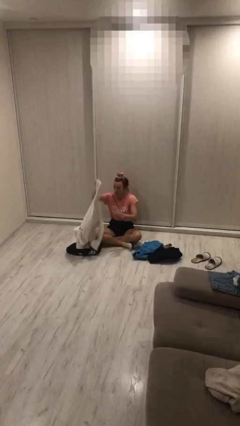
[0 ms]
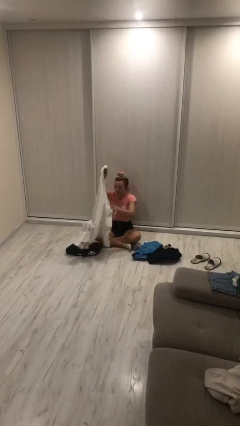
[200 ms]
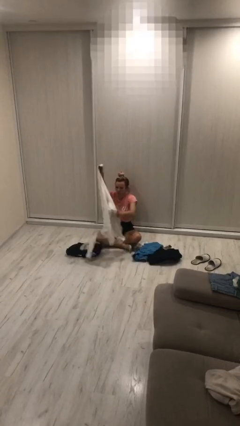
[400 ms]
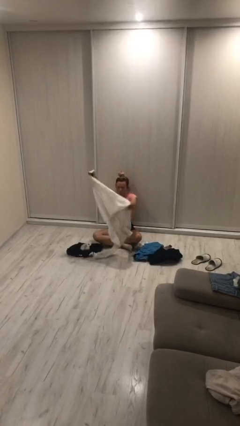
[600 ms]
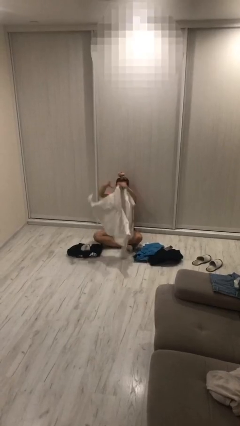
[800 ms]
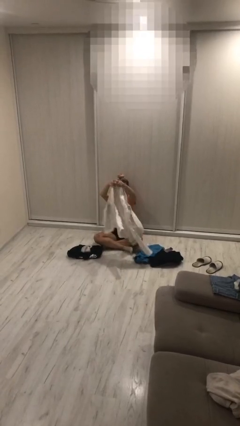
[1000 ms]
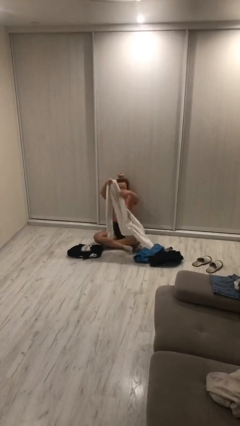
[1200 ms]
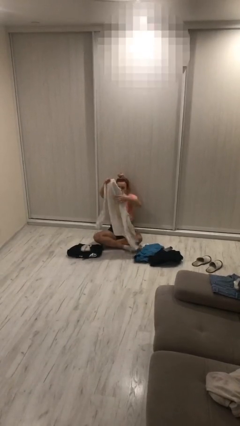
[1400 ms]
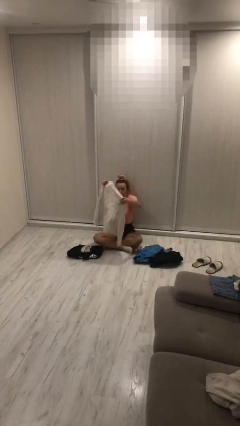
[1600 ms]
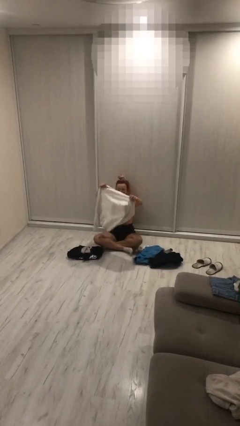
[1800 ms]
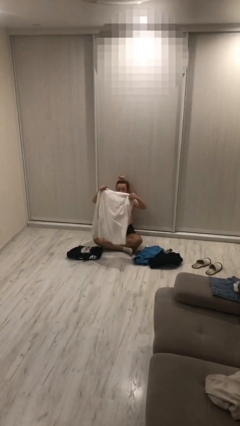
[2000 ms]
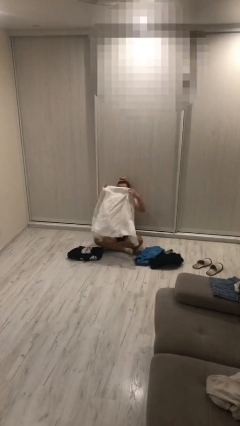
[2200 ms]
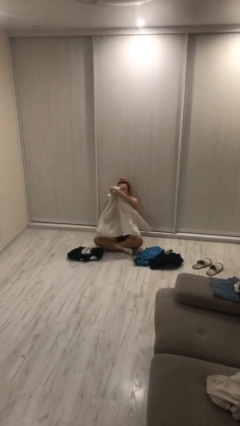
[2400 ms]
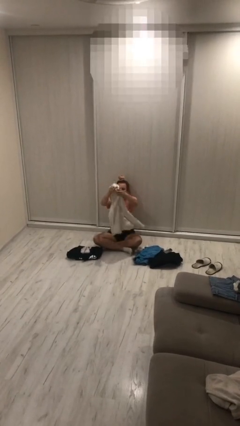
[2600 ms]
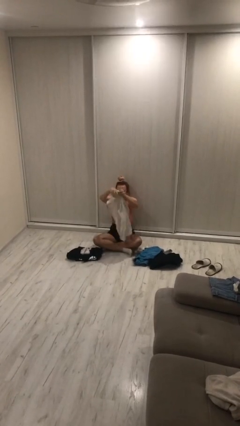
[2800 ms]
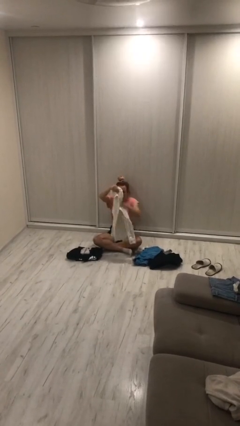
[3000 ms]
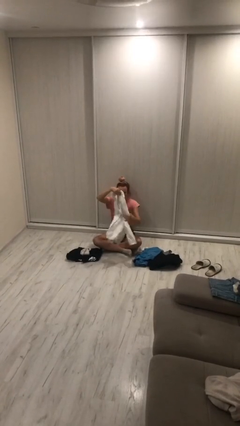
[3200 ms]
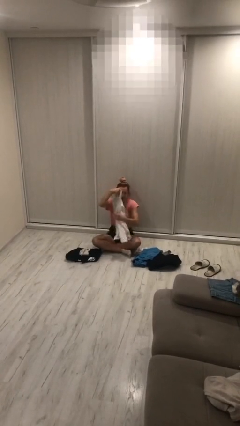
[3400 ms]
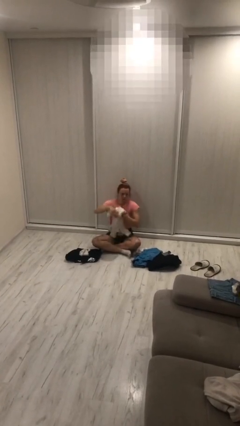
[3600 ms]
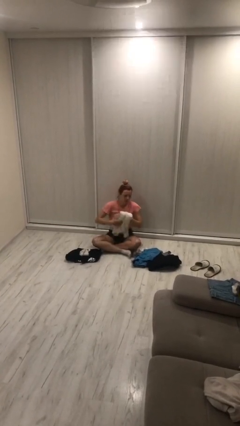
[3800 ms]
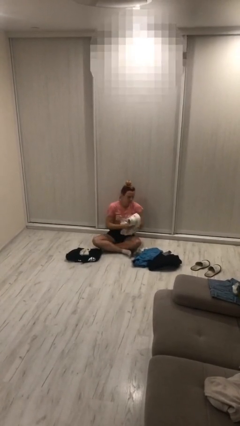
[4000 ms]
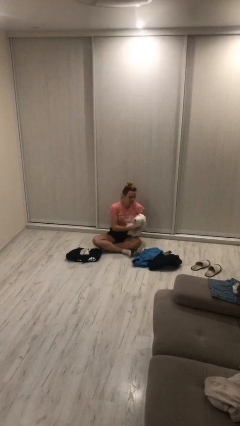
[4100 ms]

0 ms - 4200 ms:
person folds shirt

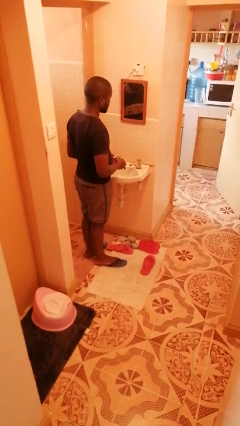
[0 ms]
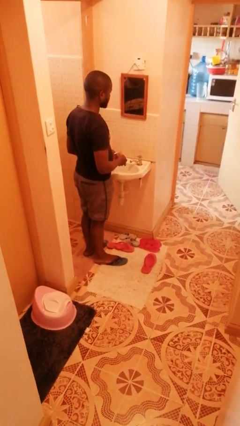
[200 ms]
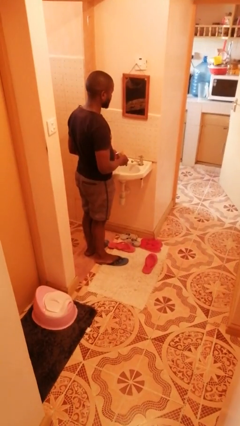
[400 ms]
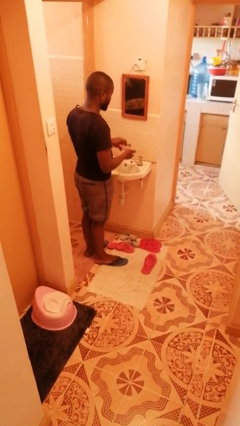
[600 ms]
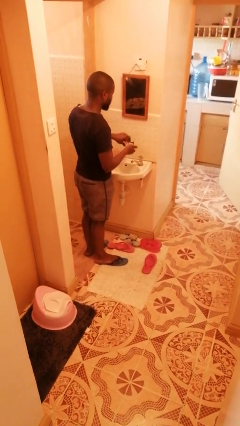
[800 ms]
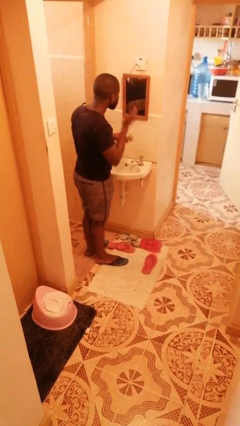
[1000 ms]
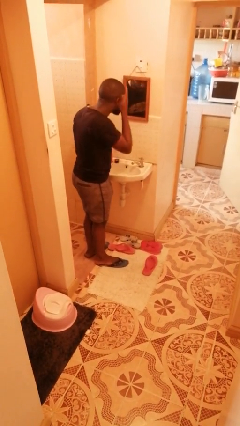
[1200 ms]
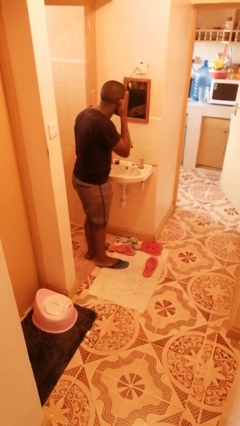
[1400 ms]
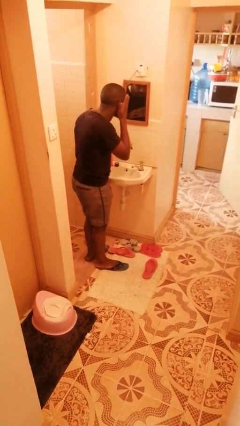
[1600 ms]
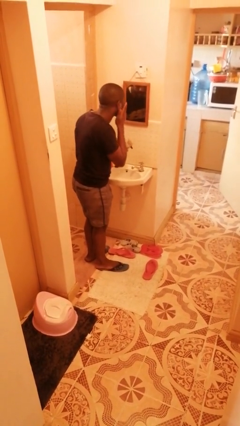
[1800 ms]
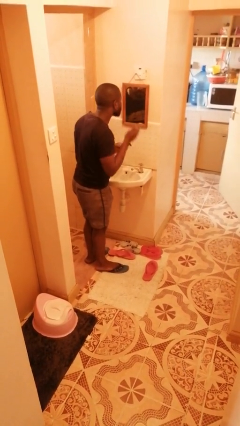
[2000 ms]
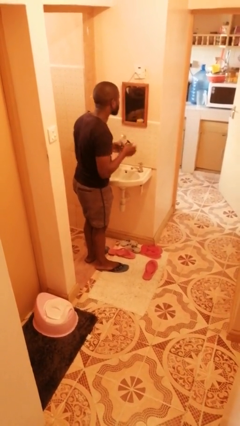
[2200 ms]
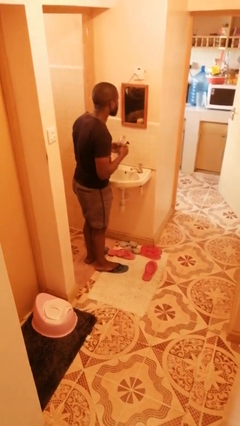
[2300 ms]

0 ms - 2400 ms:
person applies shaving cream

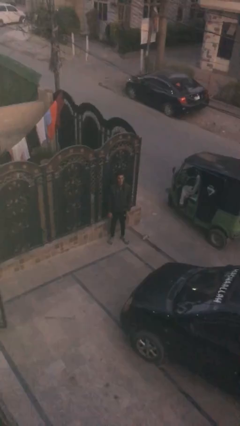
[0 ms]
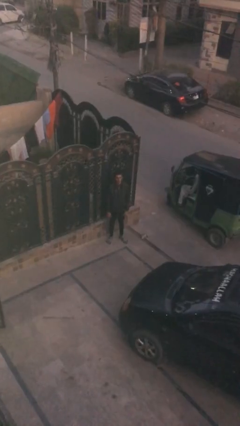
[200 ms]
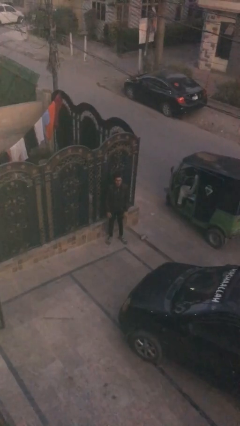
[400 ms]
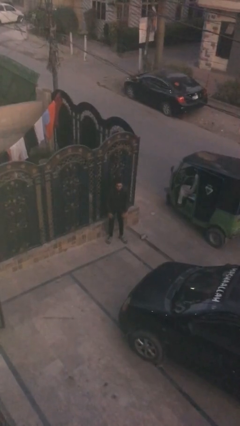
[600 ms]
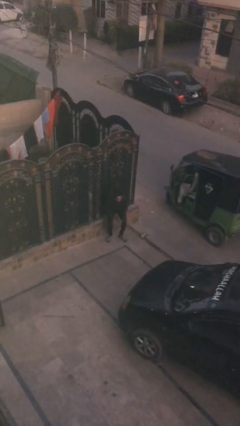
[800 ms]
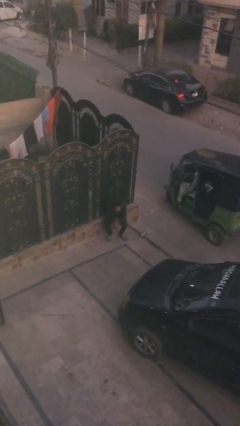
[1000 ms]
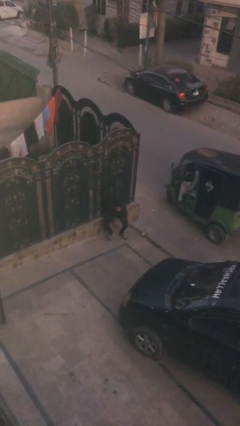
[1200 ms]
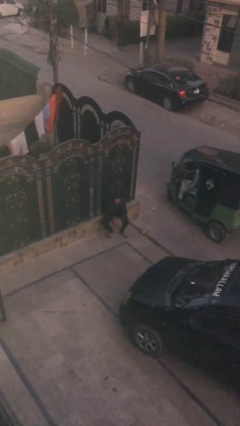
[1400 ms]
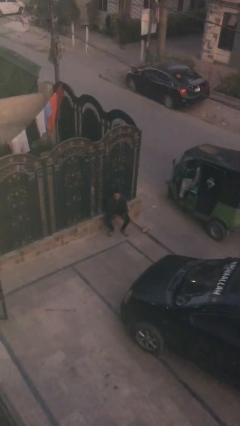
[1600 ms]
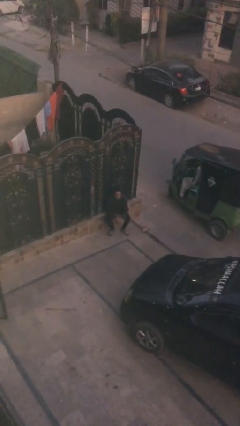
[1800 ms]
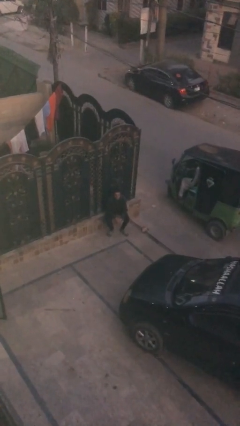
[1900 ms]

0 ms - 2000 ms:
person sits down

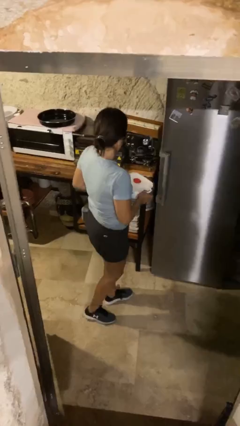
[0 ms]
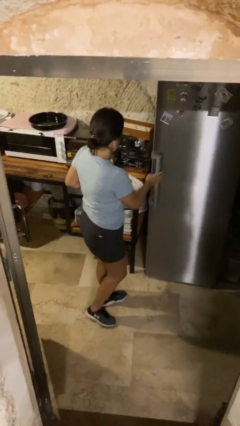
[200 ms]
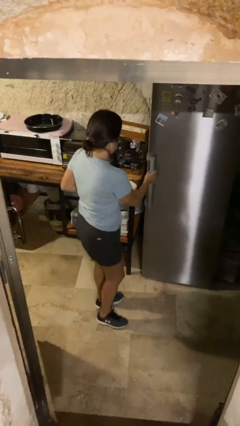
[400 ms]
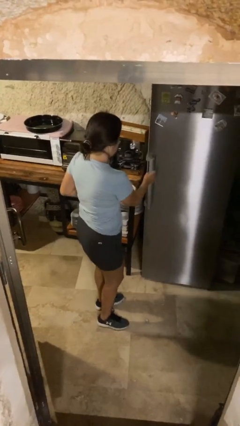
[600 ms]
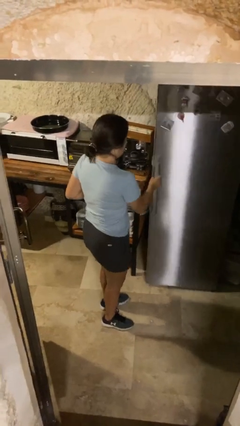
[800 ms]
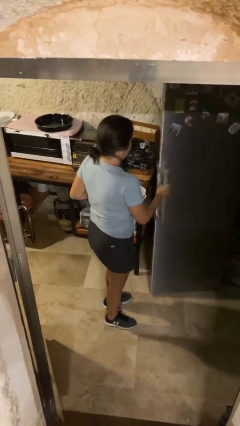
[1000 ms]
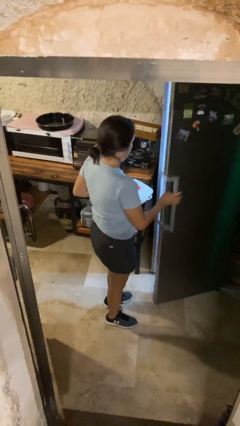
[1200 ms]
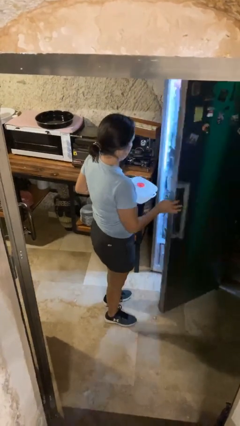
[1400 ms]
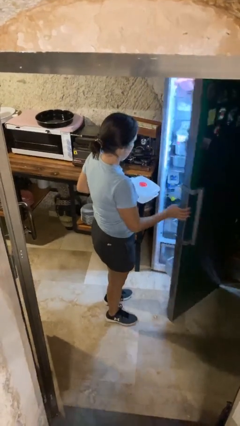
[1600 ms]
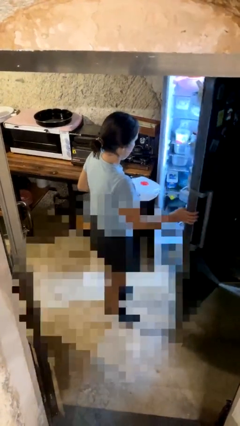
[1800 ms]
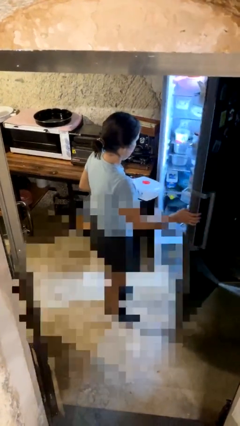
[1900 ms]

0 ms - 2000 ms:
person opens refrigerator

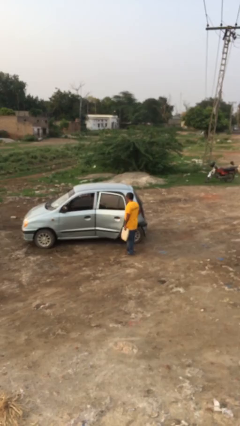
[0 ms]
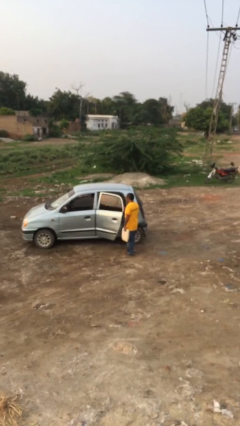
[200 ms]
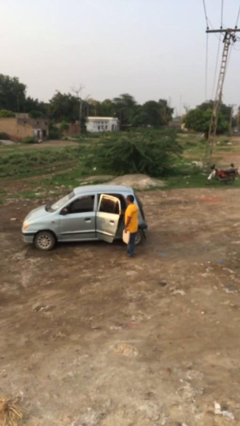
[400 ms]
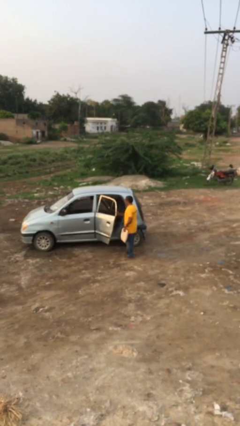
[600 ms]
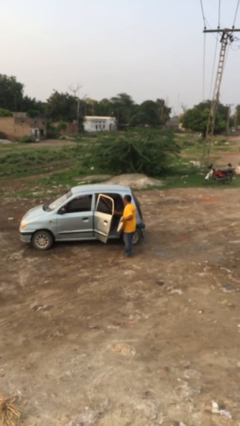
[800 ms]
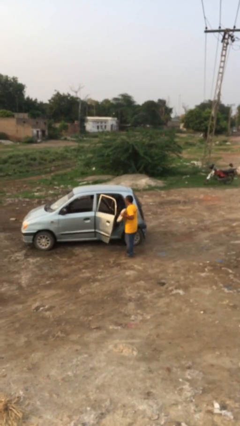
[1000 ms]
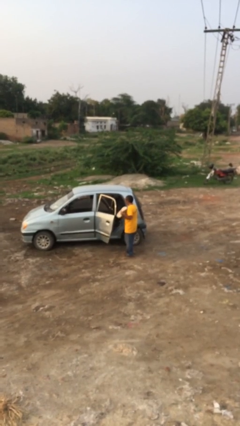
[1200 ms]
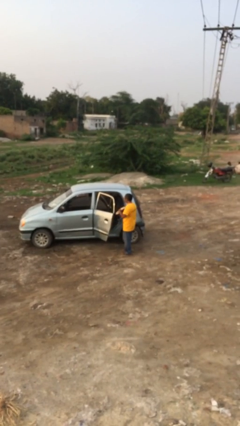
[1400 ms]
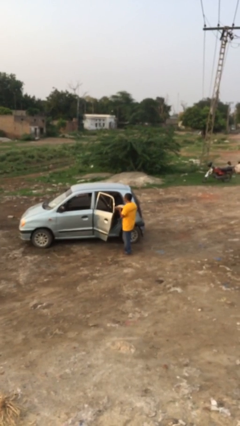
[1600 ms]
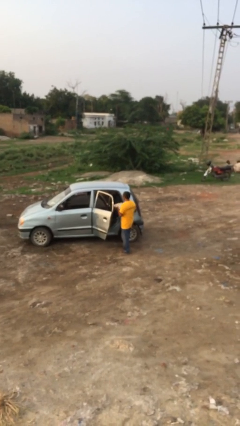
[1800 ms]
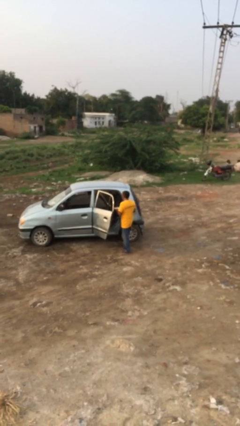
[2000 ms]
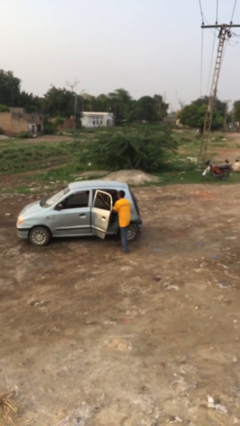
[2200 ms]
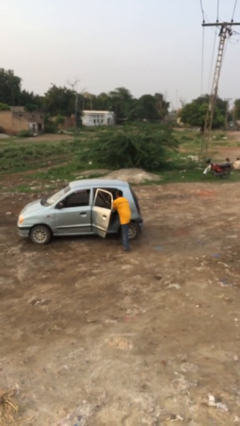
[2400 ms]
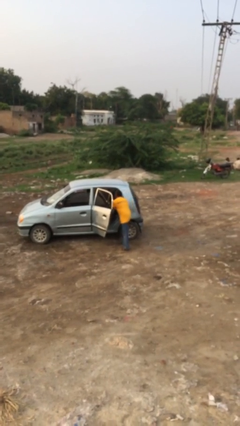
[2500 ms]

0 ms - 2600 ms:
person loads car

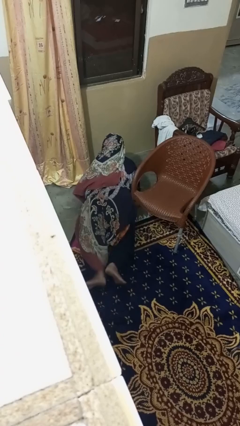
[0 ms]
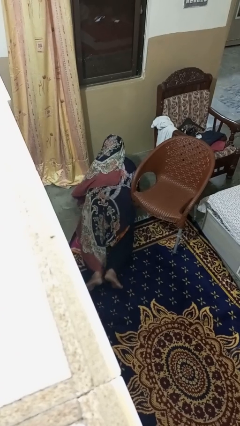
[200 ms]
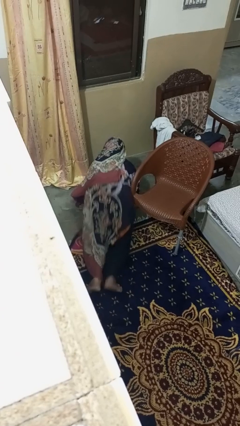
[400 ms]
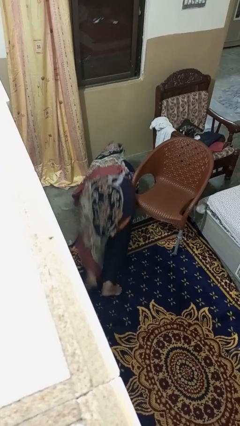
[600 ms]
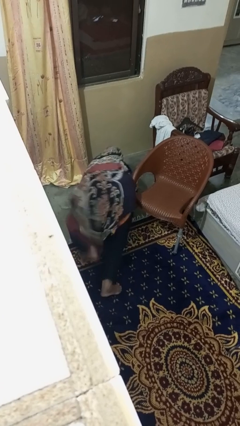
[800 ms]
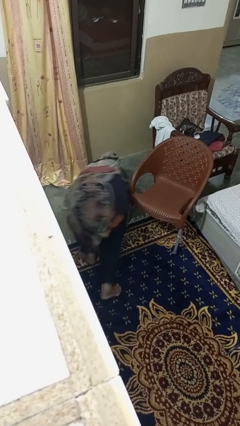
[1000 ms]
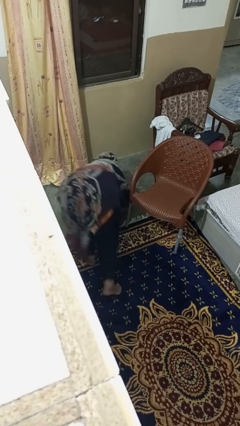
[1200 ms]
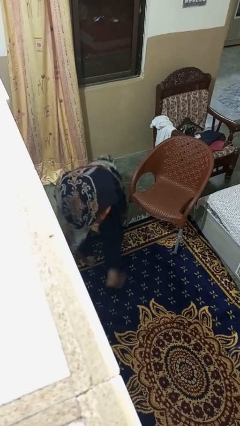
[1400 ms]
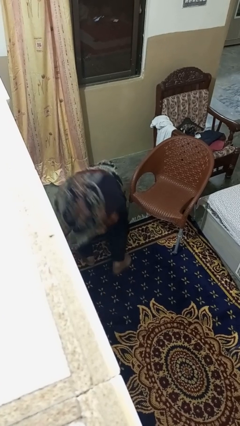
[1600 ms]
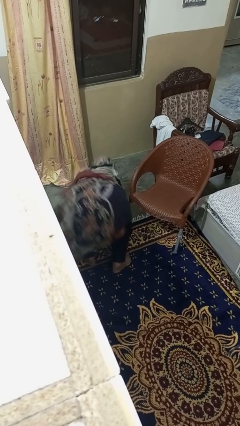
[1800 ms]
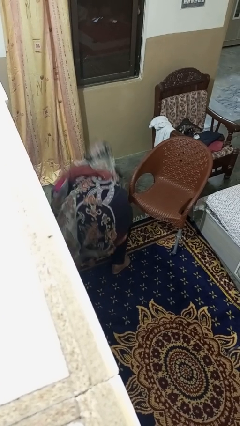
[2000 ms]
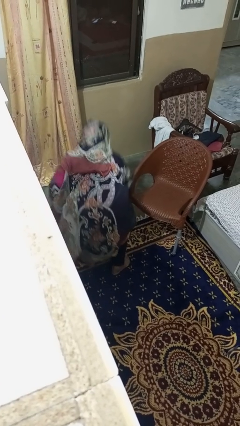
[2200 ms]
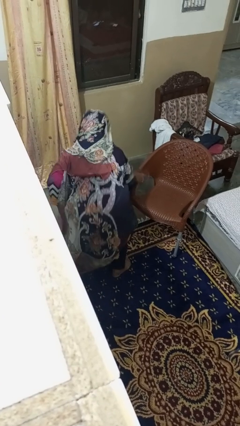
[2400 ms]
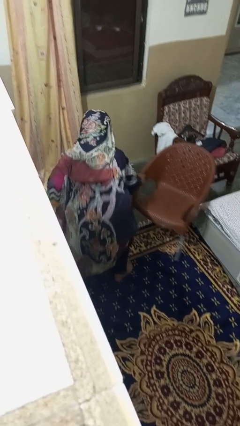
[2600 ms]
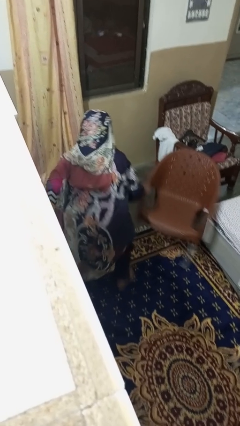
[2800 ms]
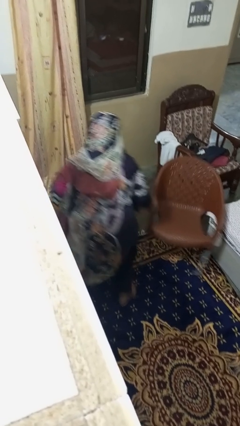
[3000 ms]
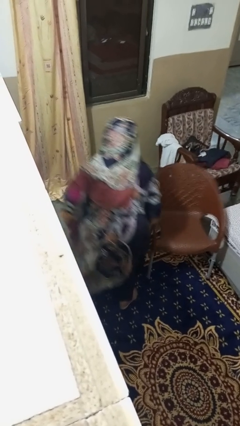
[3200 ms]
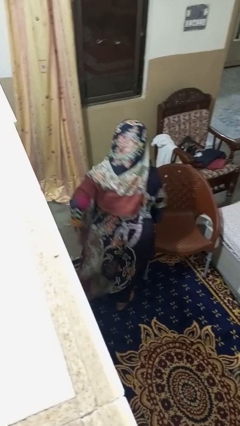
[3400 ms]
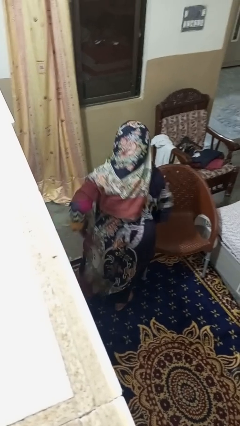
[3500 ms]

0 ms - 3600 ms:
person stands up from floor

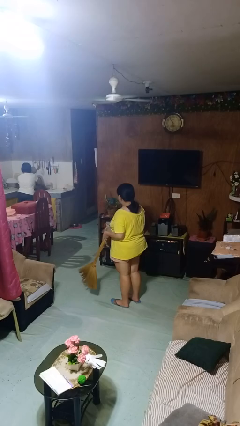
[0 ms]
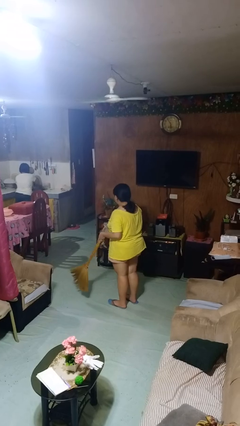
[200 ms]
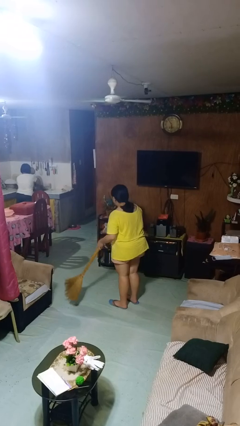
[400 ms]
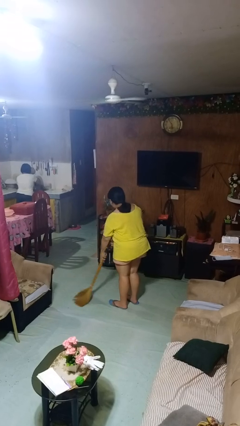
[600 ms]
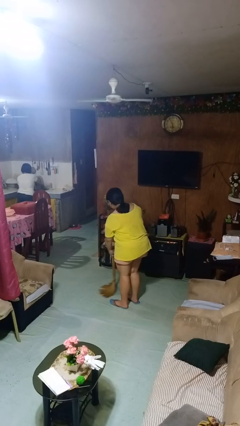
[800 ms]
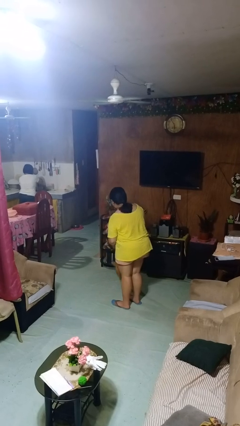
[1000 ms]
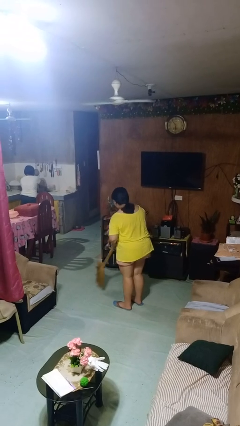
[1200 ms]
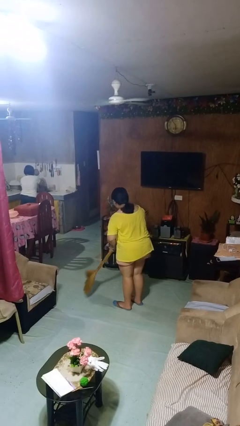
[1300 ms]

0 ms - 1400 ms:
person sweeps floor
